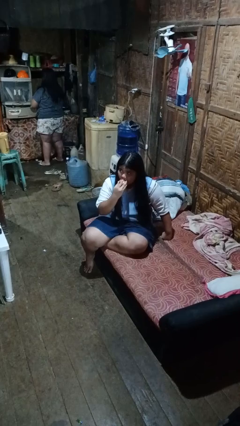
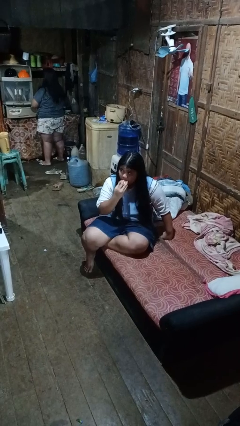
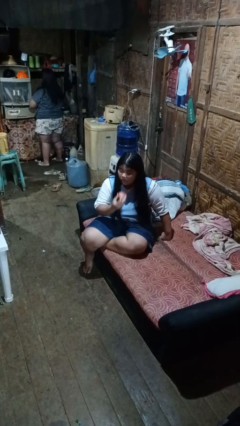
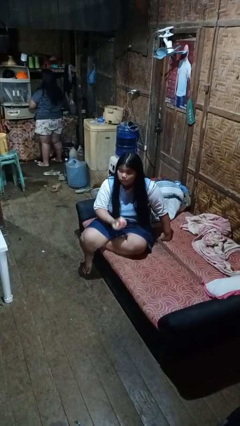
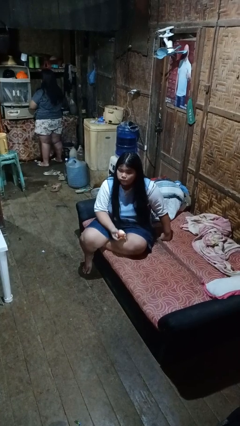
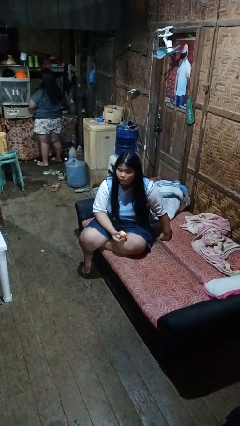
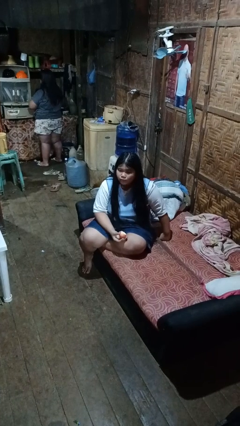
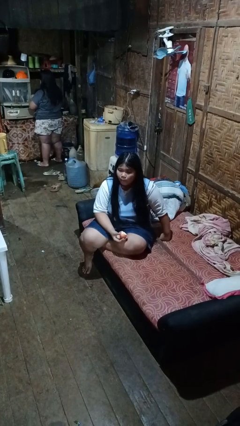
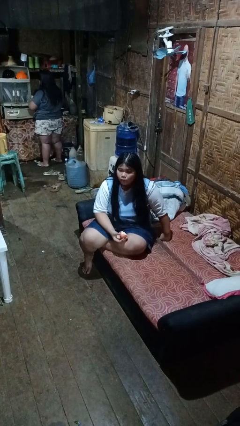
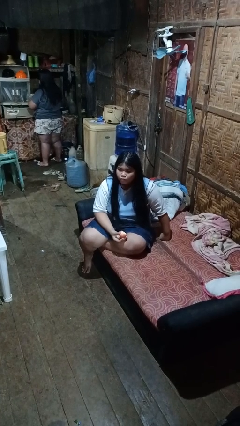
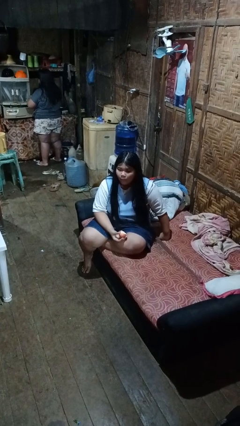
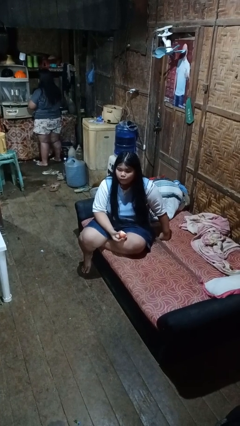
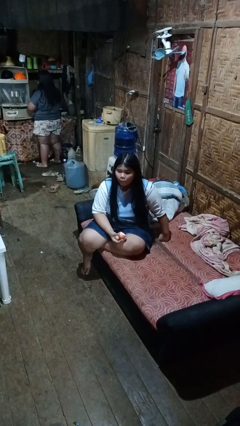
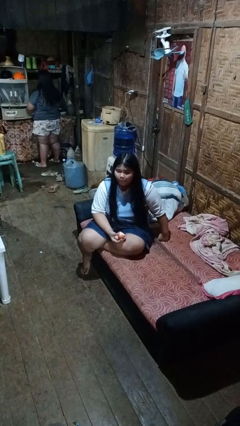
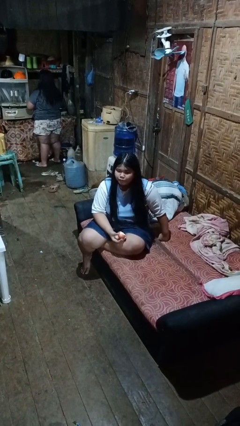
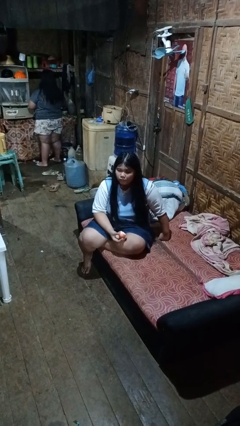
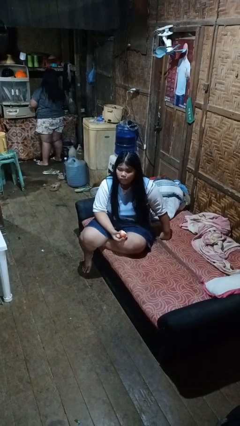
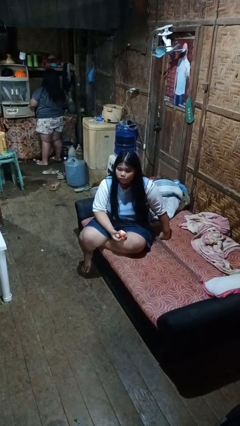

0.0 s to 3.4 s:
person eats apple

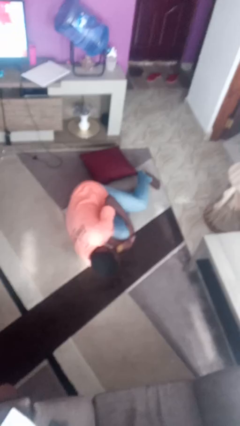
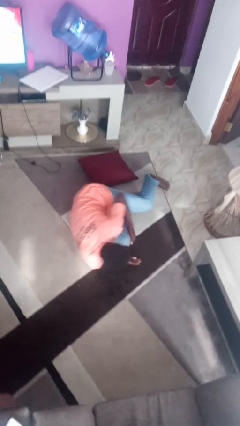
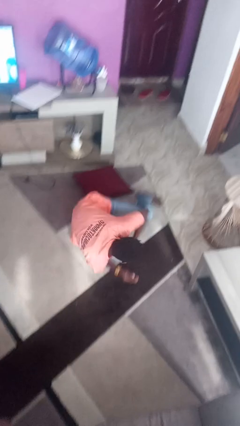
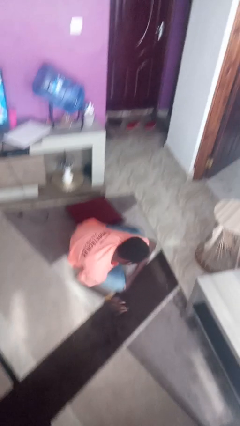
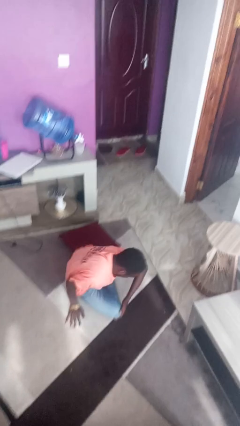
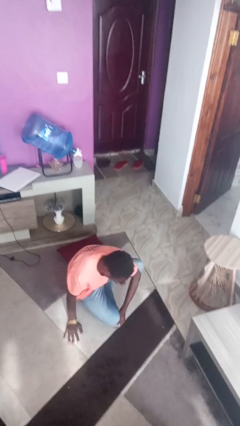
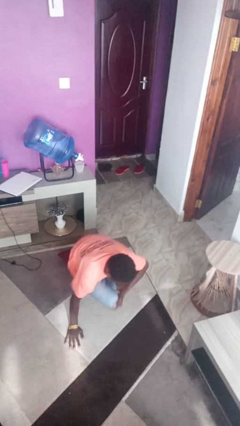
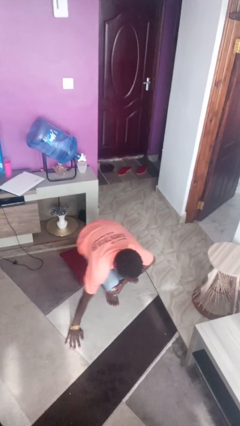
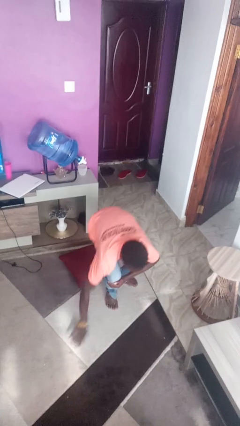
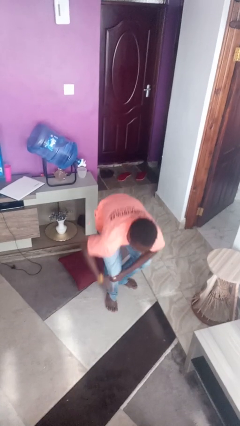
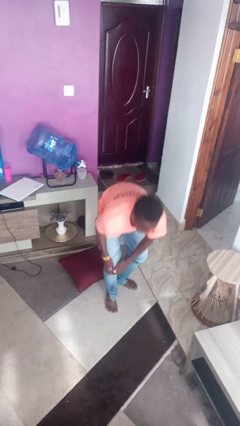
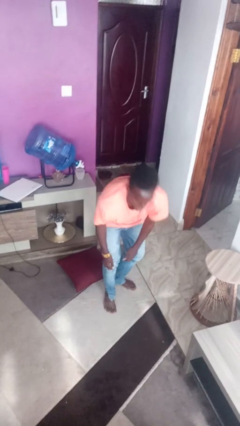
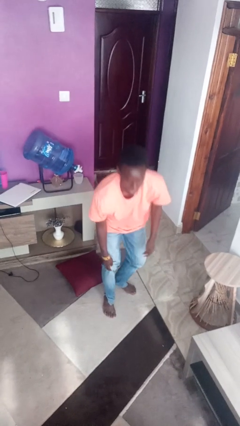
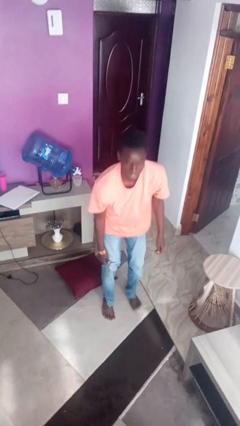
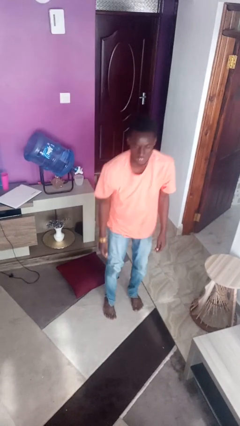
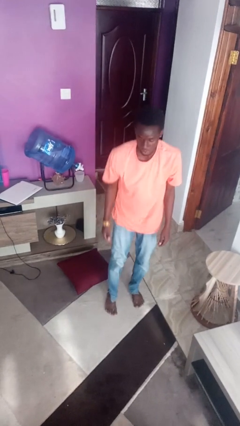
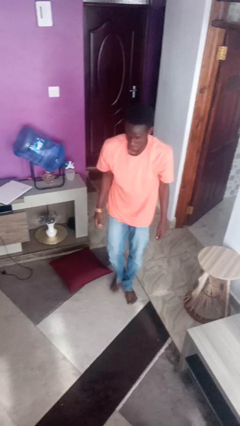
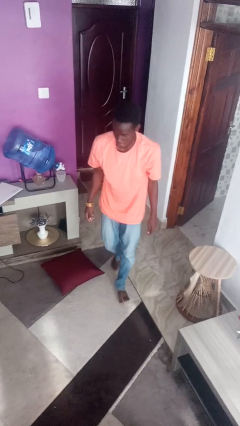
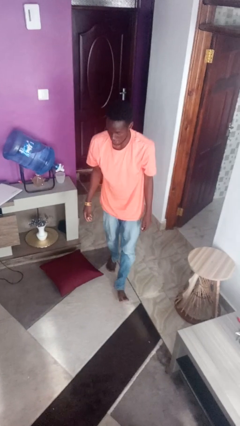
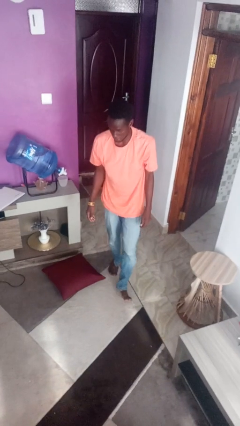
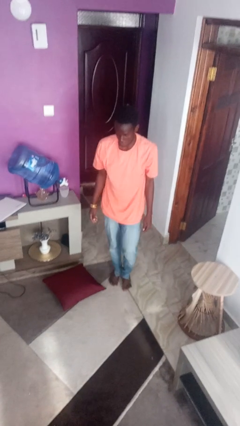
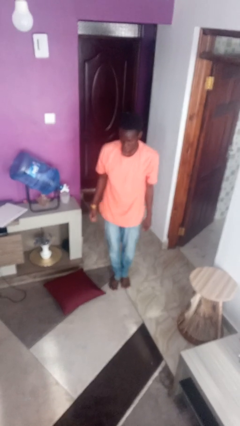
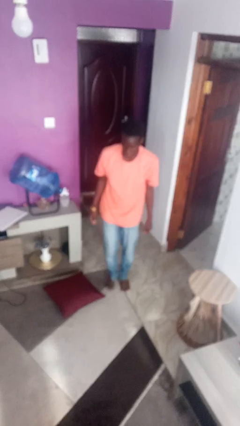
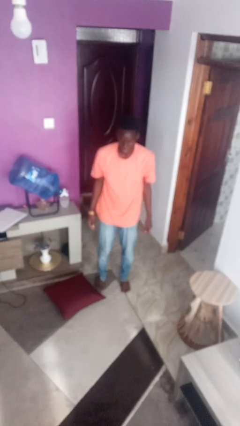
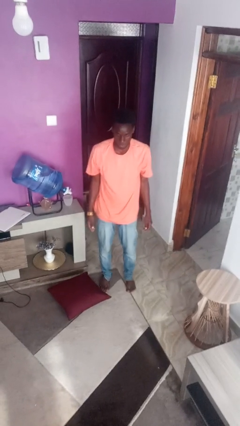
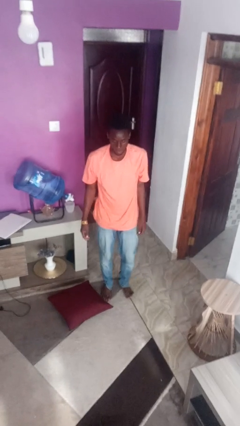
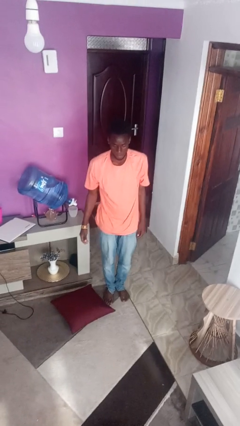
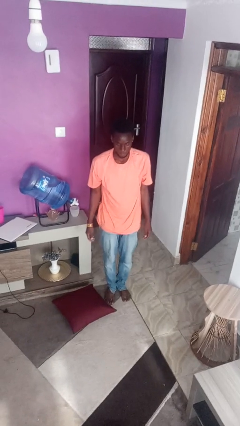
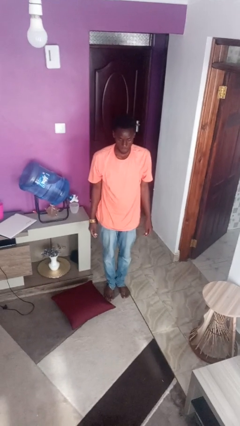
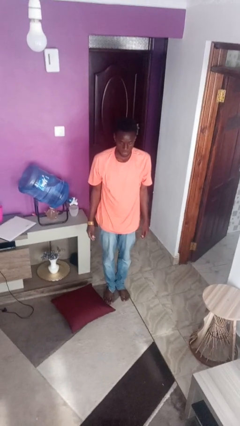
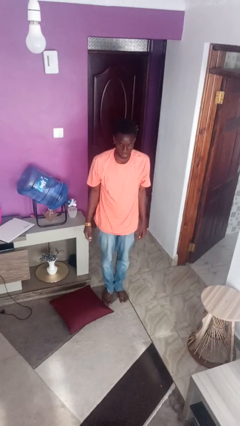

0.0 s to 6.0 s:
person stands up from floor

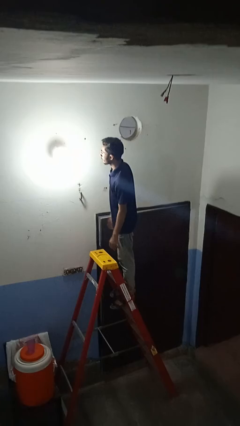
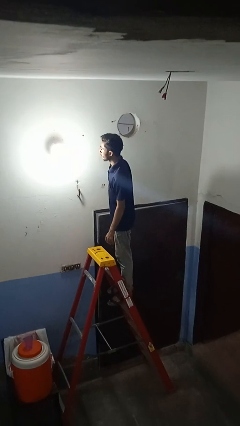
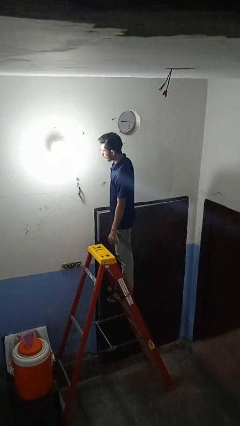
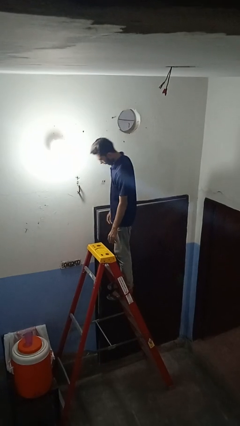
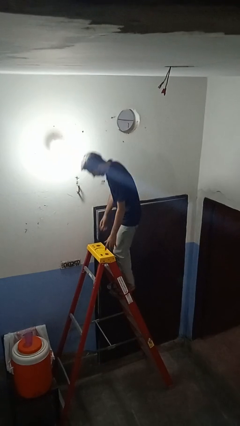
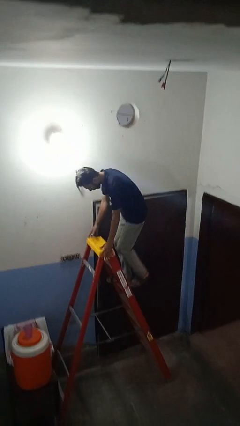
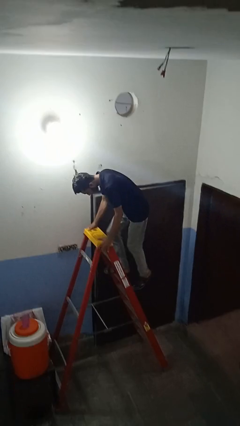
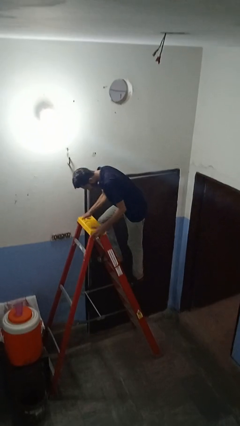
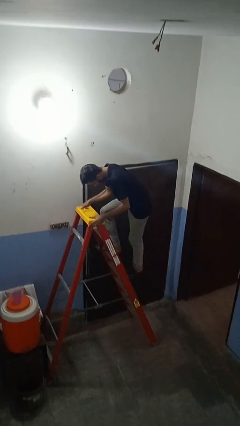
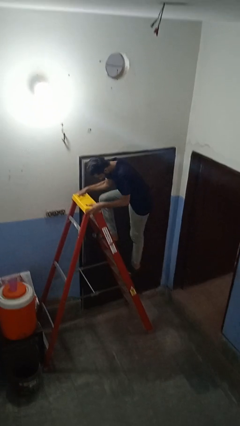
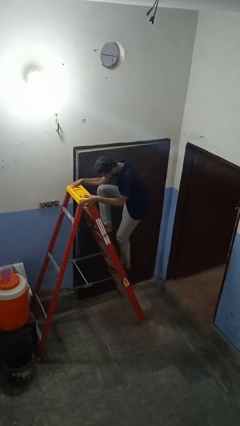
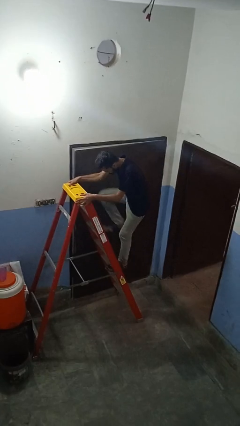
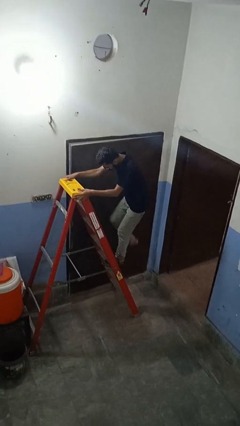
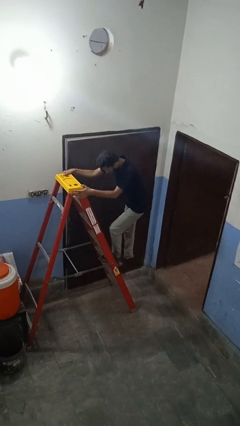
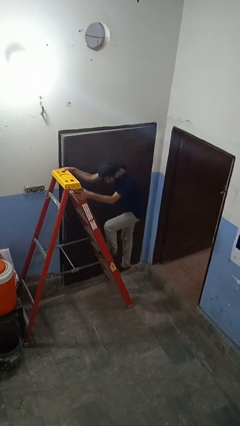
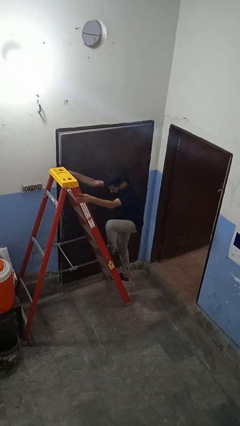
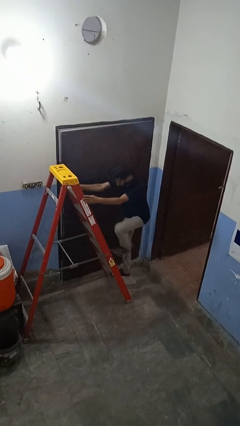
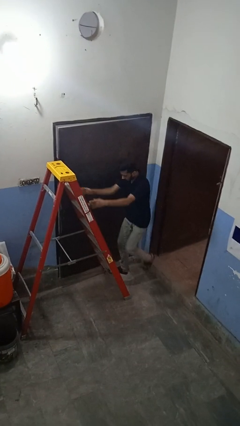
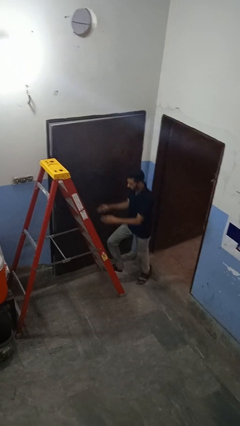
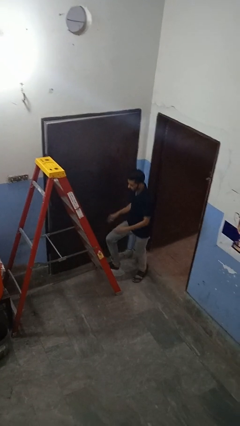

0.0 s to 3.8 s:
person climbs down ladder

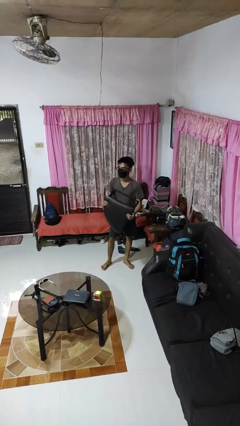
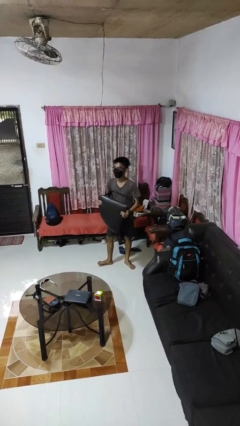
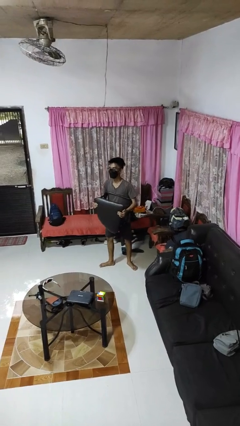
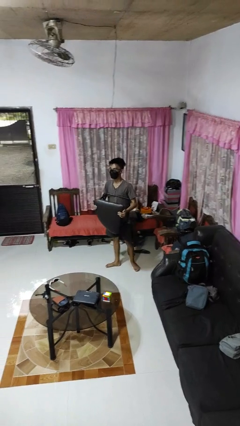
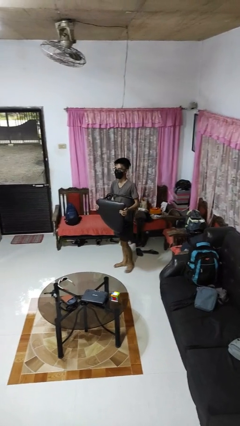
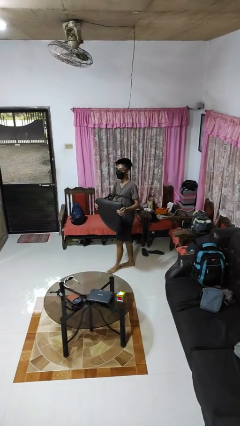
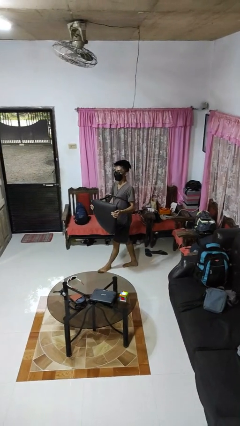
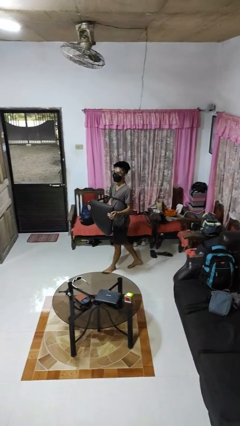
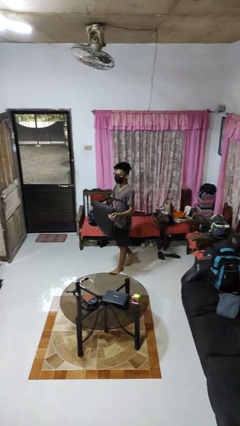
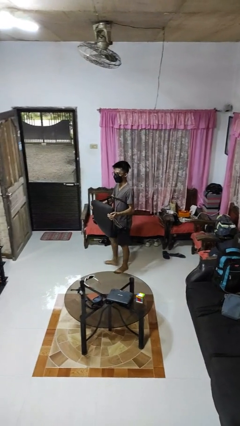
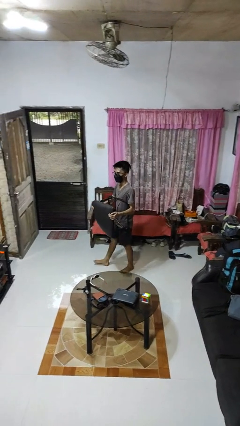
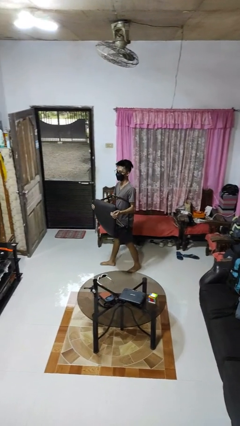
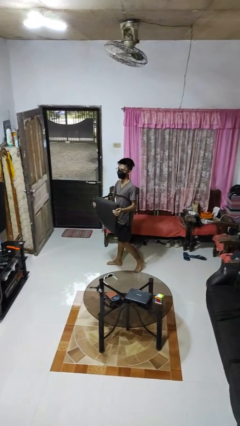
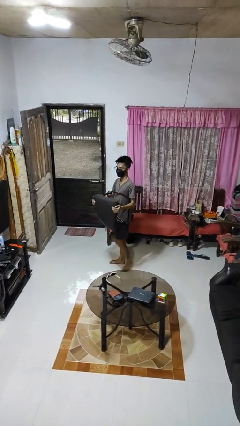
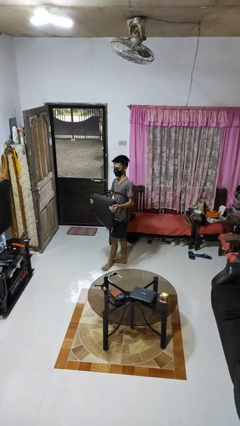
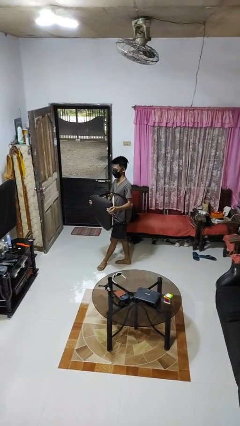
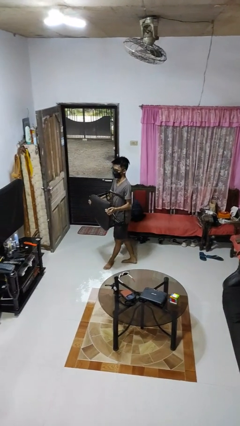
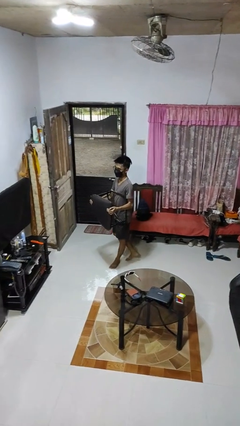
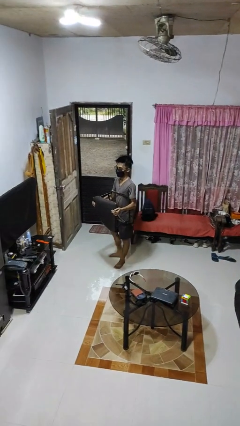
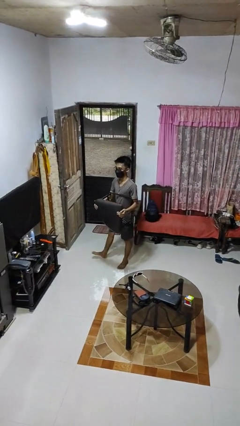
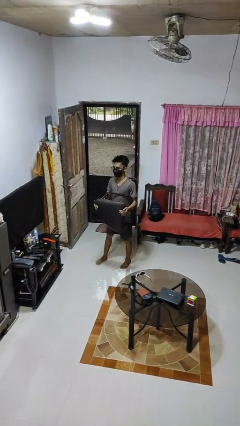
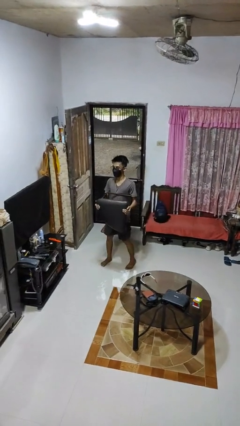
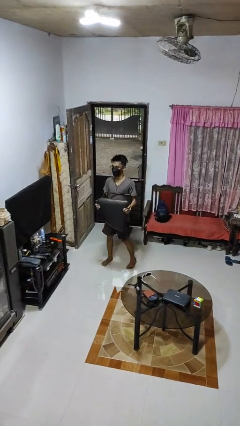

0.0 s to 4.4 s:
person carries furniture

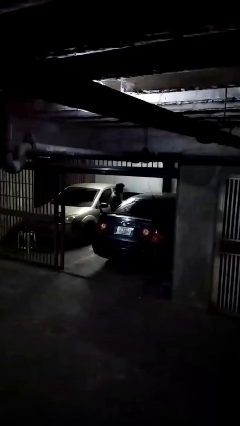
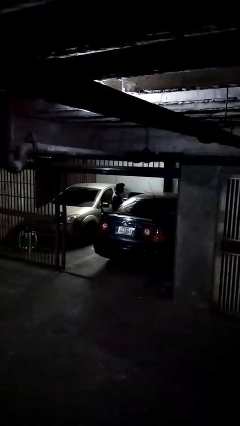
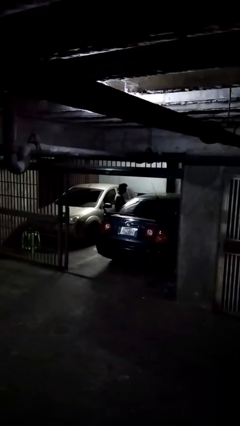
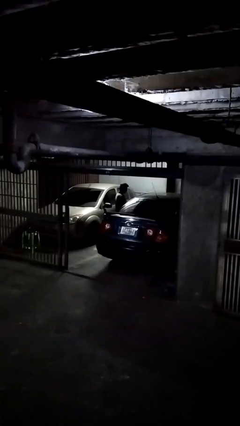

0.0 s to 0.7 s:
person closes car door
